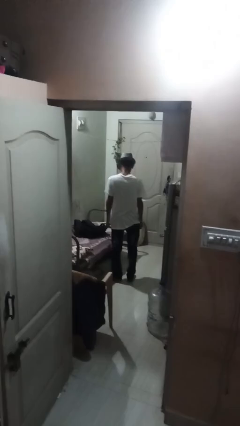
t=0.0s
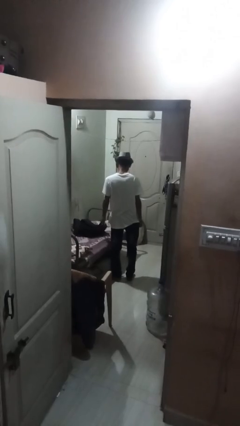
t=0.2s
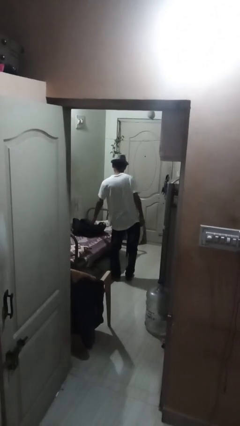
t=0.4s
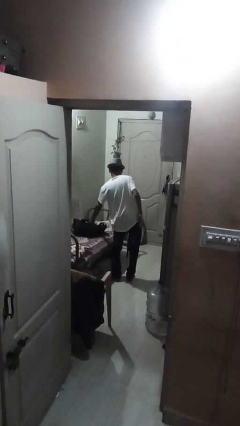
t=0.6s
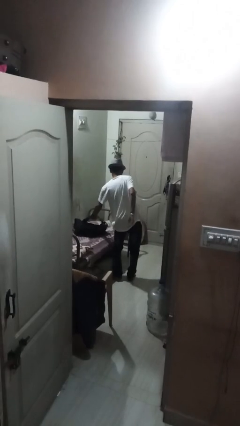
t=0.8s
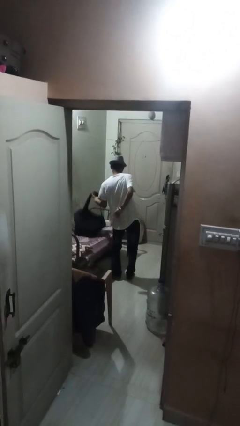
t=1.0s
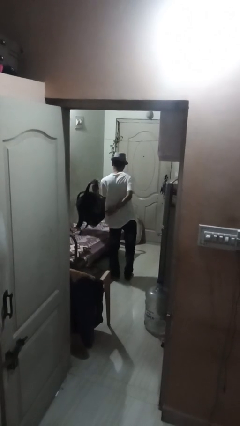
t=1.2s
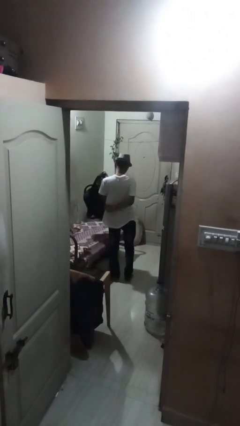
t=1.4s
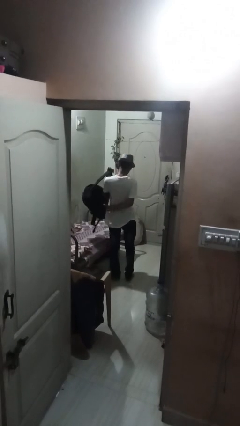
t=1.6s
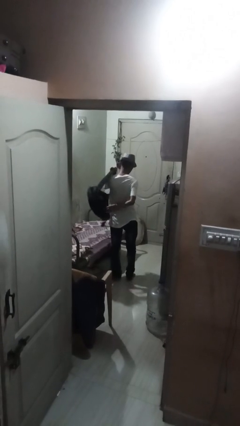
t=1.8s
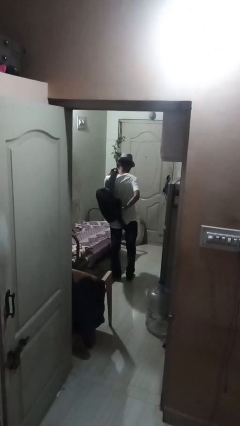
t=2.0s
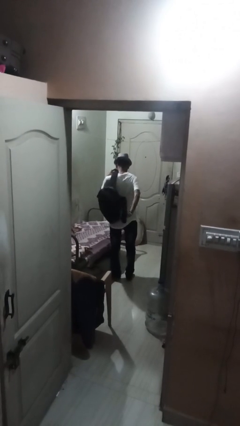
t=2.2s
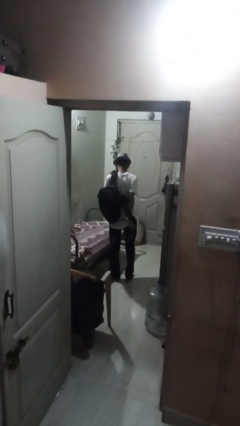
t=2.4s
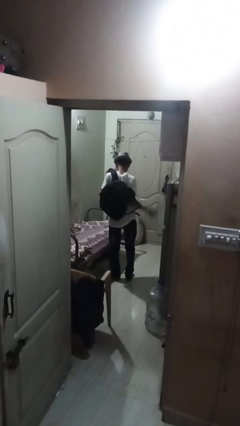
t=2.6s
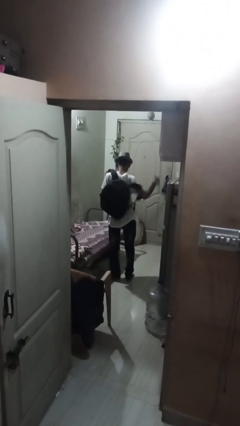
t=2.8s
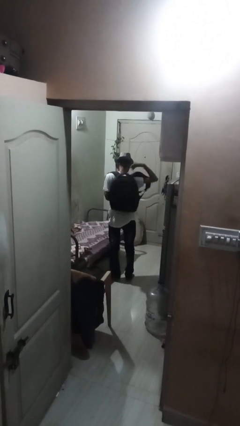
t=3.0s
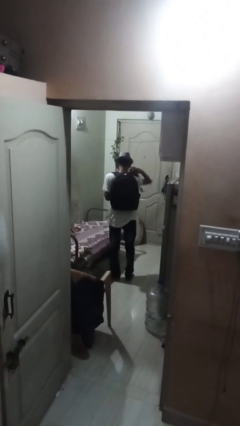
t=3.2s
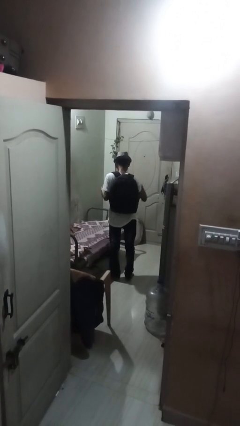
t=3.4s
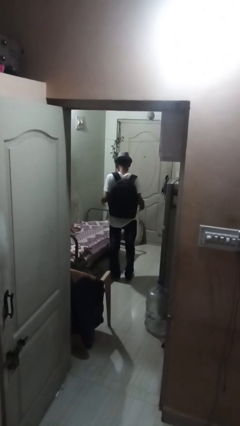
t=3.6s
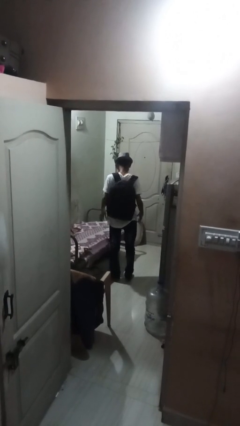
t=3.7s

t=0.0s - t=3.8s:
person puts on backpack

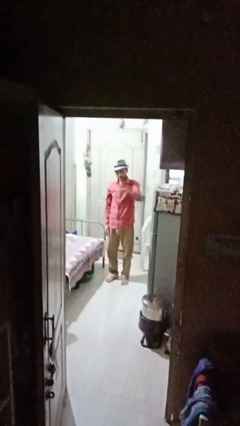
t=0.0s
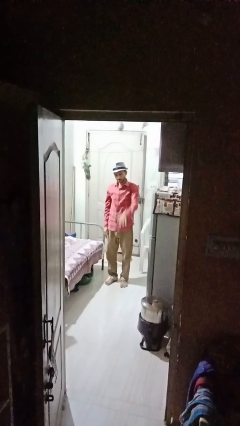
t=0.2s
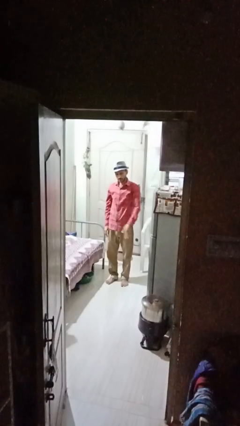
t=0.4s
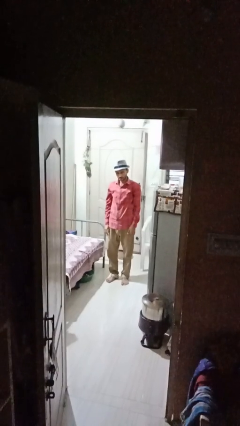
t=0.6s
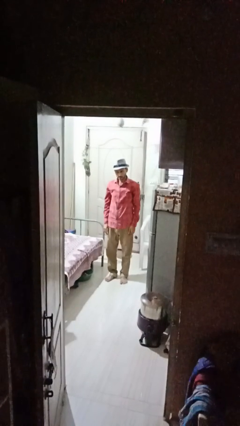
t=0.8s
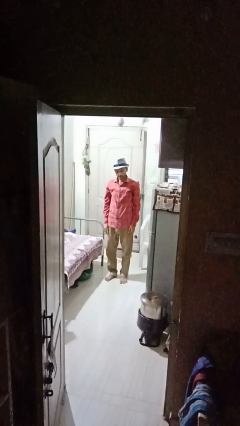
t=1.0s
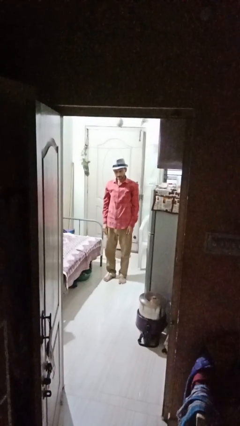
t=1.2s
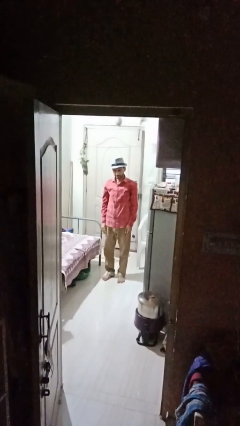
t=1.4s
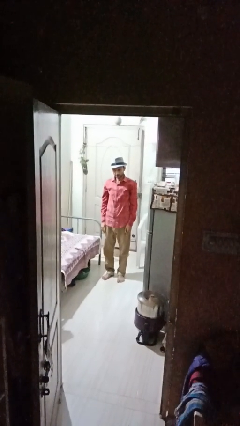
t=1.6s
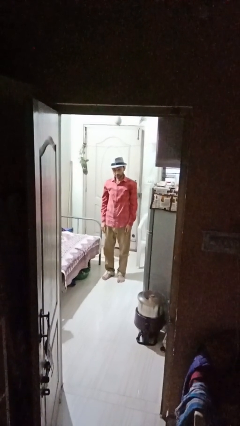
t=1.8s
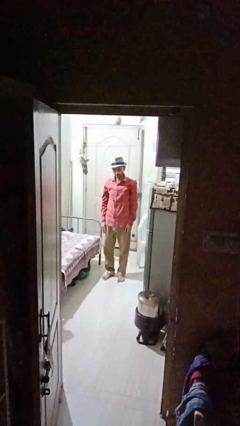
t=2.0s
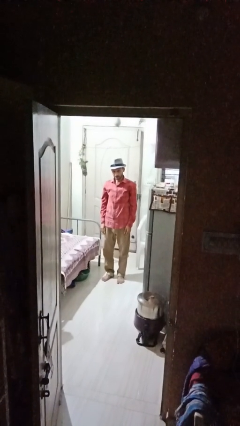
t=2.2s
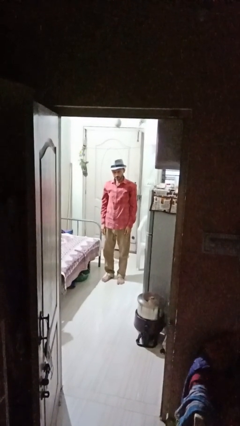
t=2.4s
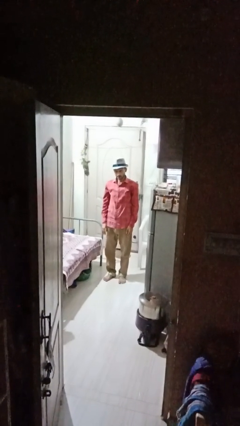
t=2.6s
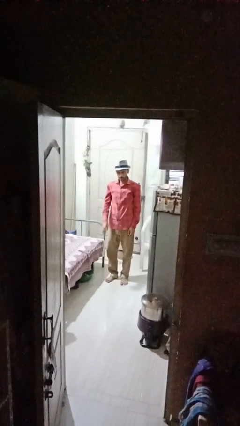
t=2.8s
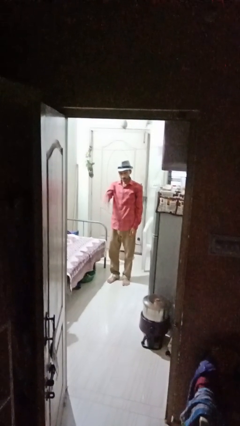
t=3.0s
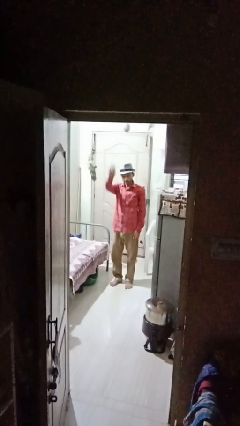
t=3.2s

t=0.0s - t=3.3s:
person gestures lower hand

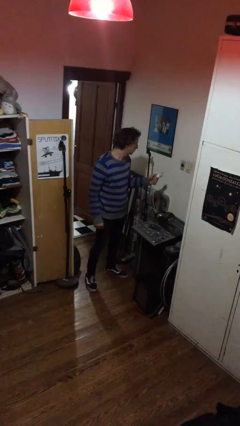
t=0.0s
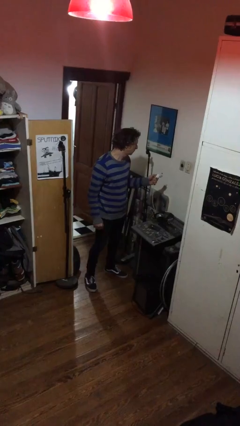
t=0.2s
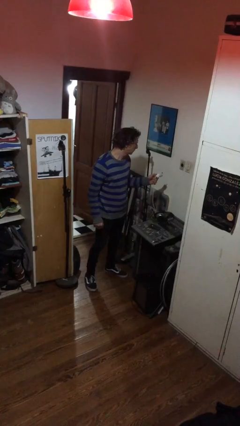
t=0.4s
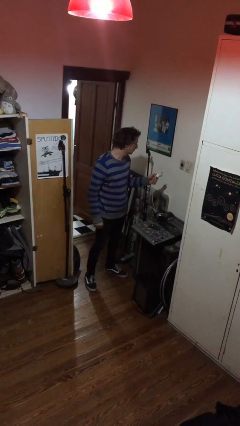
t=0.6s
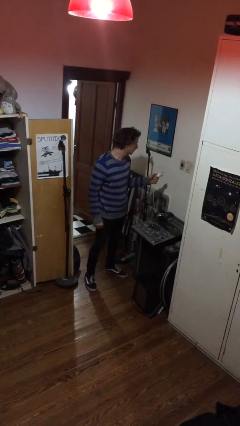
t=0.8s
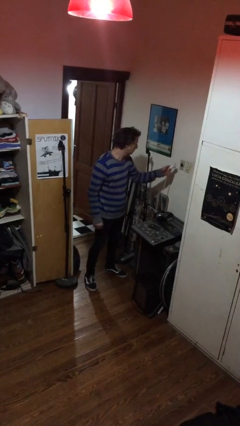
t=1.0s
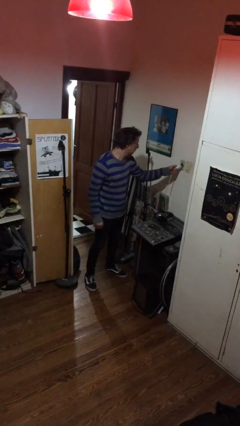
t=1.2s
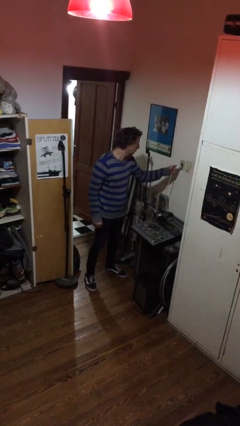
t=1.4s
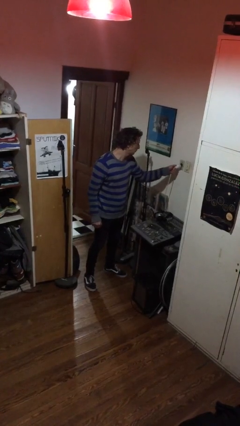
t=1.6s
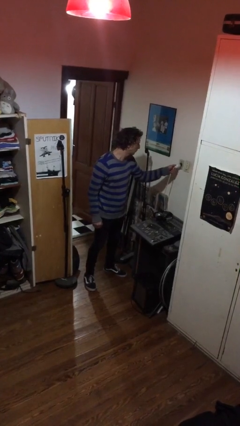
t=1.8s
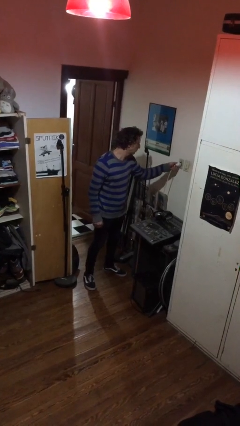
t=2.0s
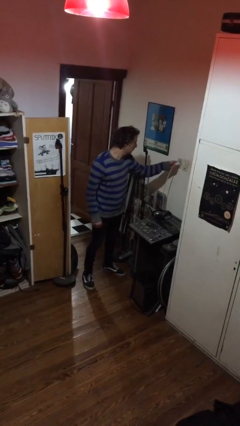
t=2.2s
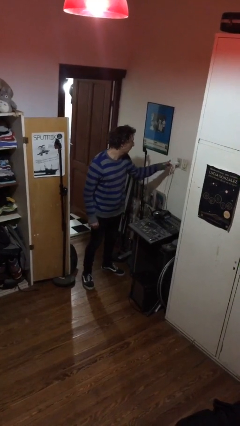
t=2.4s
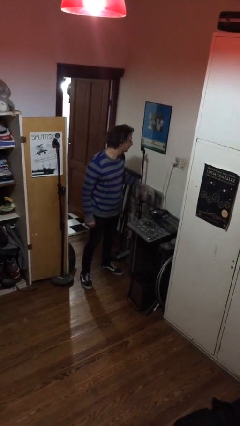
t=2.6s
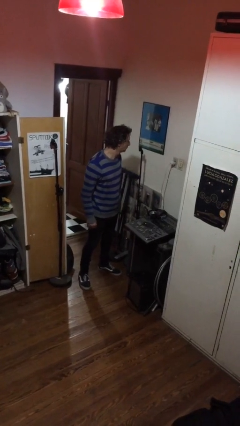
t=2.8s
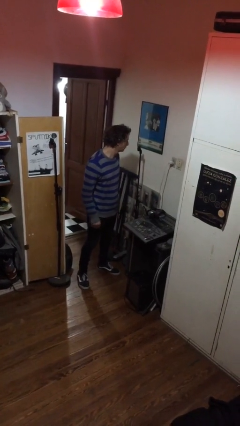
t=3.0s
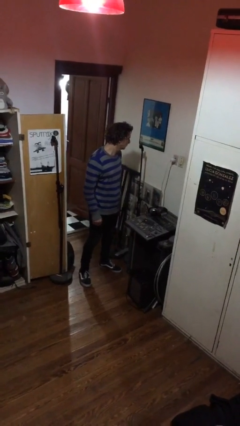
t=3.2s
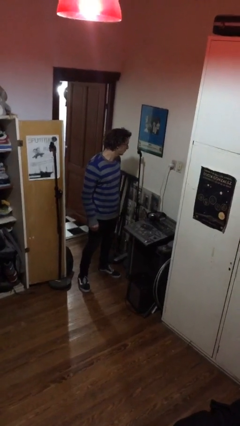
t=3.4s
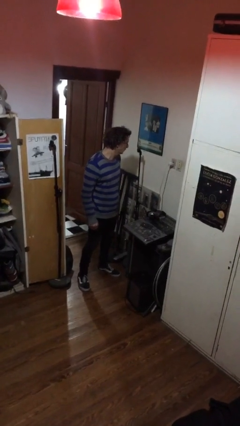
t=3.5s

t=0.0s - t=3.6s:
person plugs into electrical socket

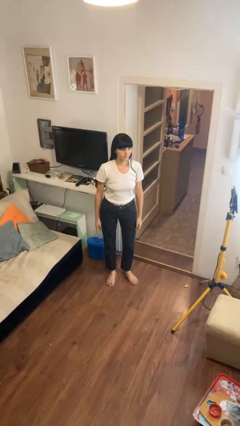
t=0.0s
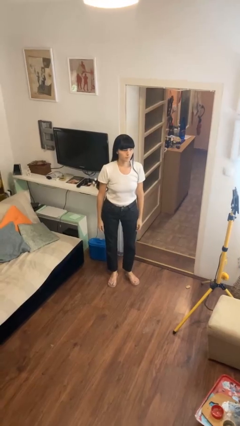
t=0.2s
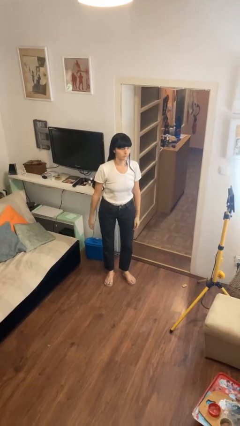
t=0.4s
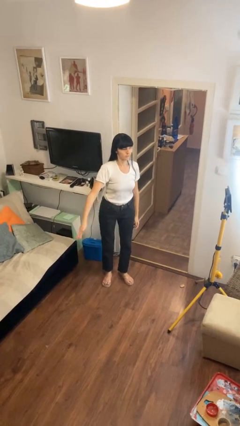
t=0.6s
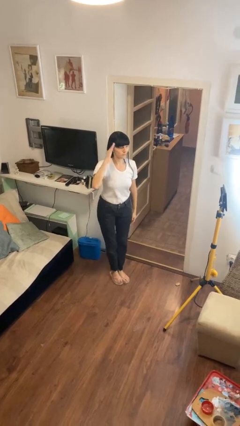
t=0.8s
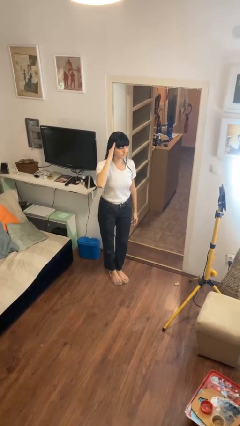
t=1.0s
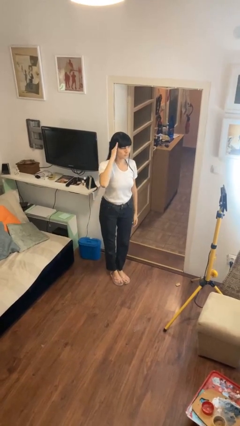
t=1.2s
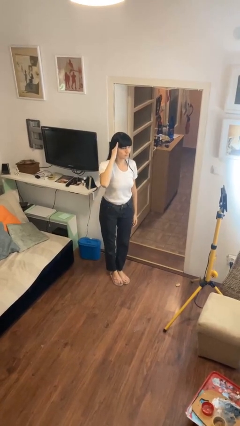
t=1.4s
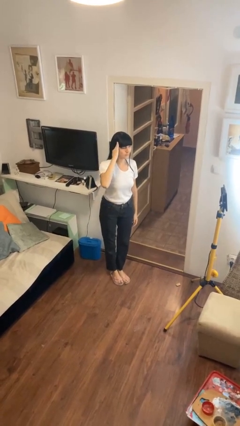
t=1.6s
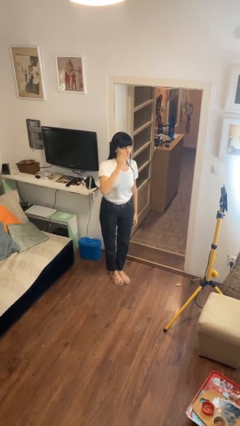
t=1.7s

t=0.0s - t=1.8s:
person salutes

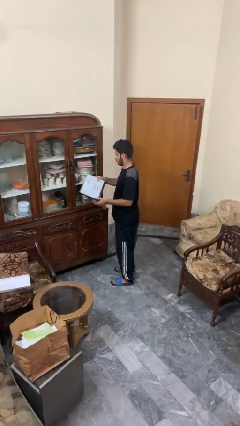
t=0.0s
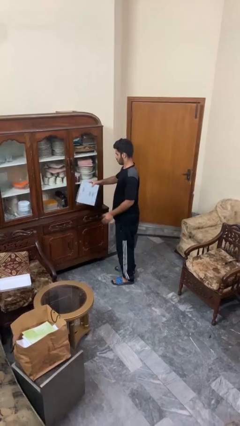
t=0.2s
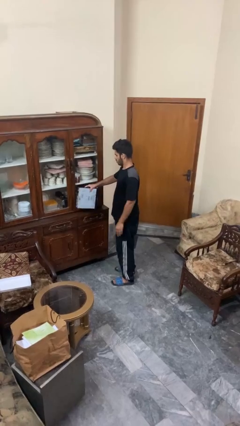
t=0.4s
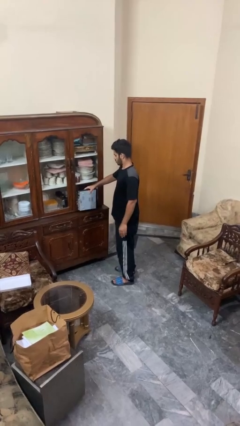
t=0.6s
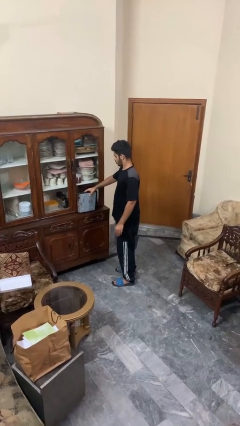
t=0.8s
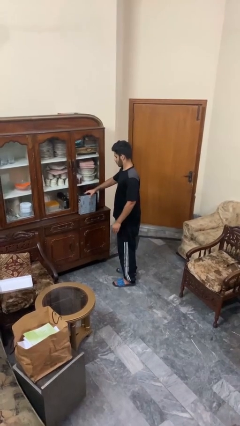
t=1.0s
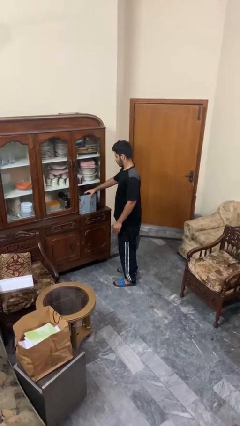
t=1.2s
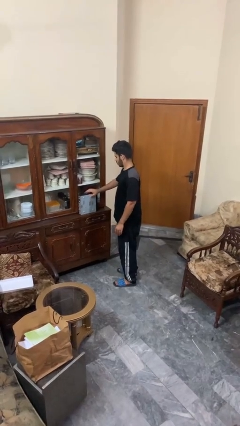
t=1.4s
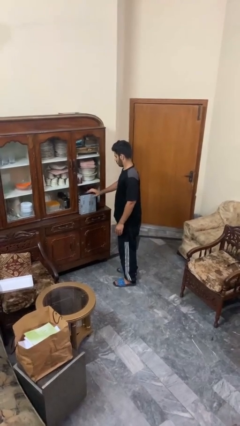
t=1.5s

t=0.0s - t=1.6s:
person puts down object on countertop

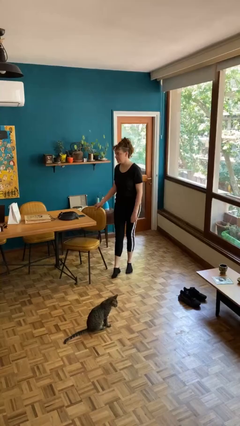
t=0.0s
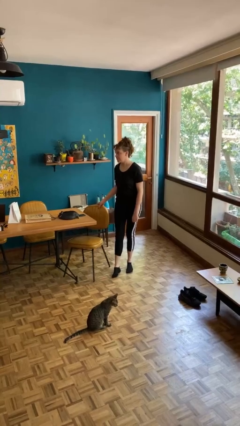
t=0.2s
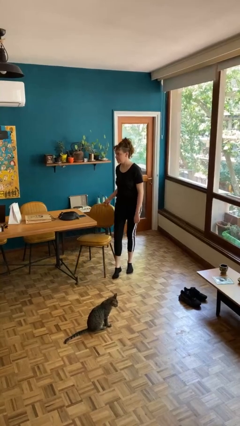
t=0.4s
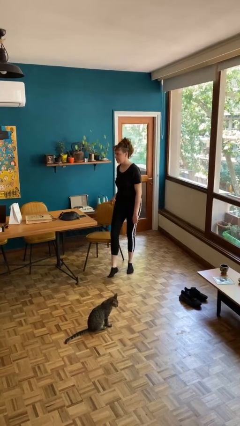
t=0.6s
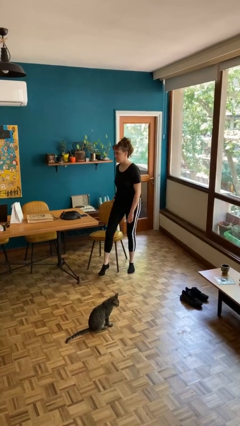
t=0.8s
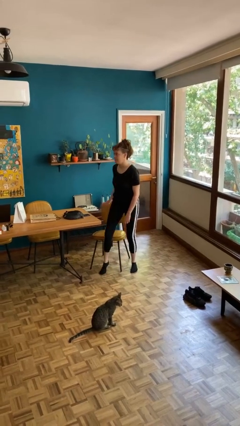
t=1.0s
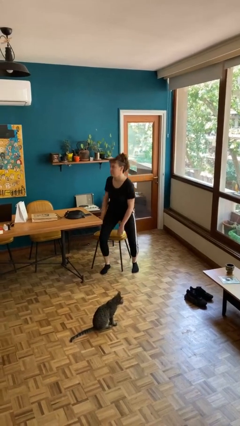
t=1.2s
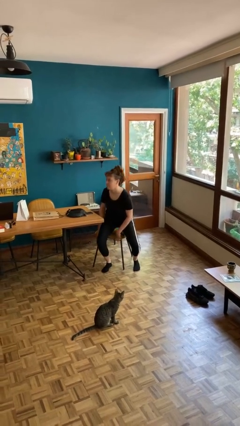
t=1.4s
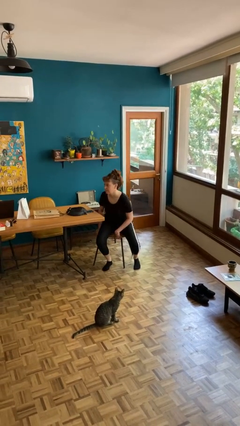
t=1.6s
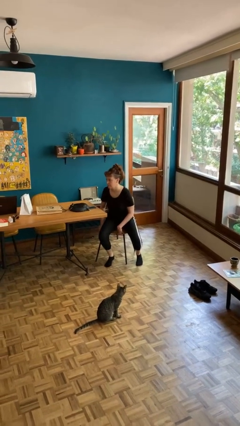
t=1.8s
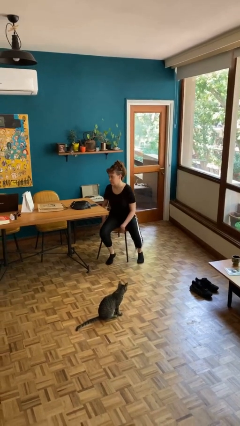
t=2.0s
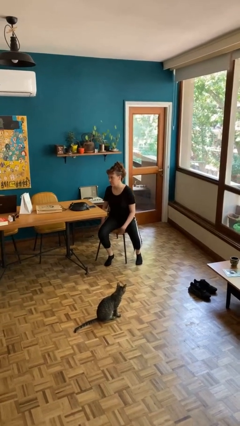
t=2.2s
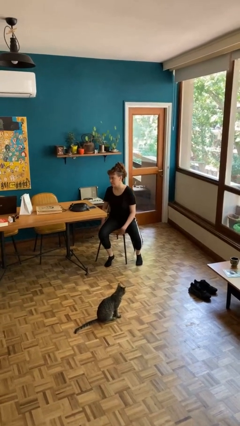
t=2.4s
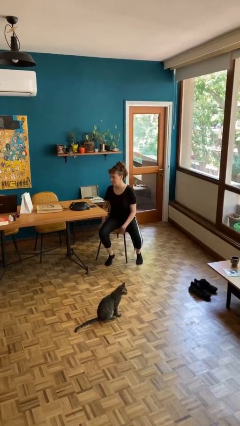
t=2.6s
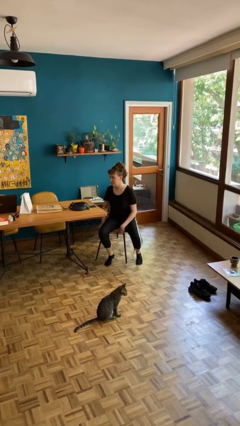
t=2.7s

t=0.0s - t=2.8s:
person sits down
